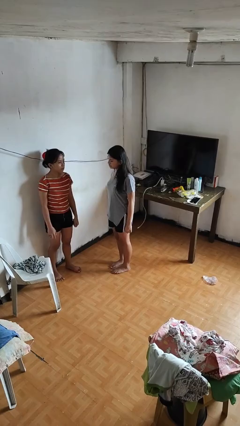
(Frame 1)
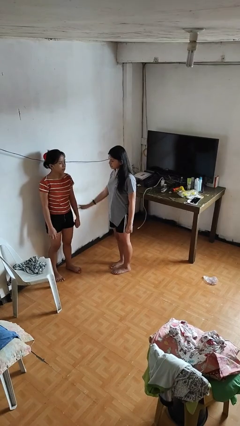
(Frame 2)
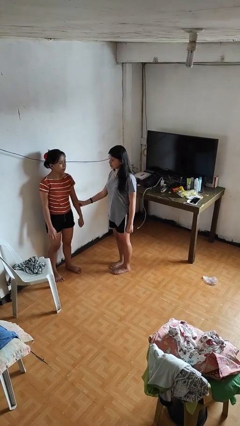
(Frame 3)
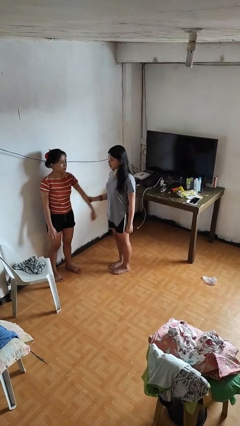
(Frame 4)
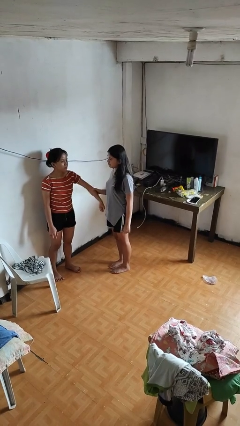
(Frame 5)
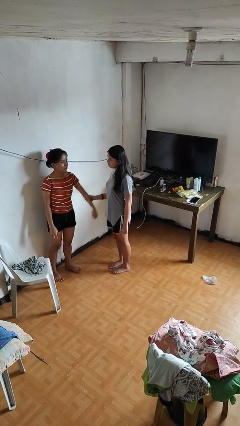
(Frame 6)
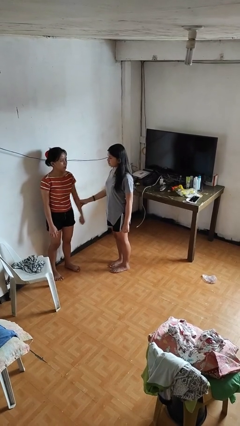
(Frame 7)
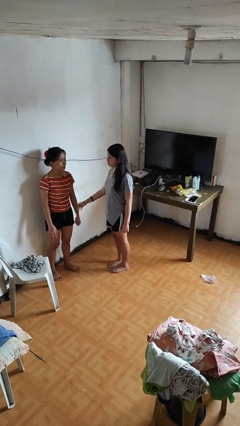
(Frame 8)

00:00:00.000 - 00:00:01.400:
person grabs person by forearm

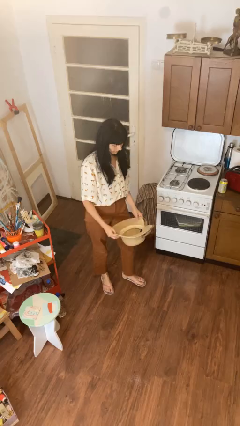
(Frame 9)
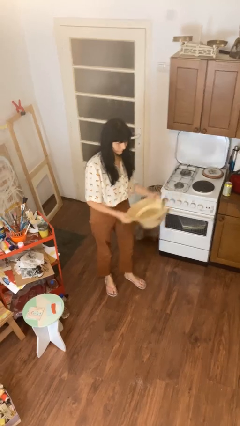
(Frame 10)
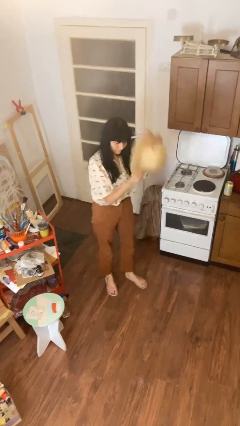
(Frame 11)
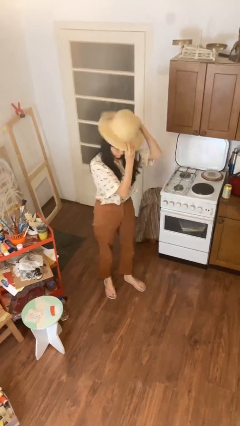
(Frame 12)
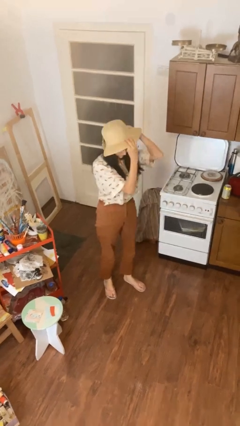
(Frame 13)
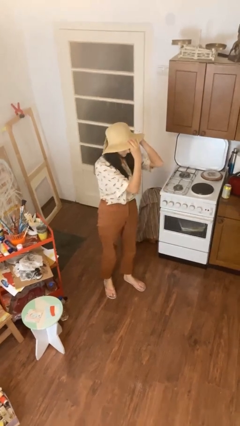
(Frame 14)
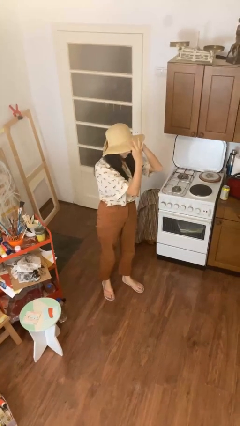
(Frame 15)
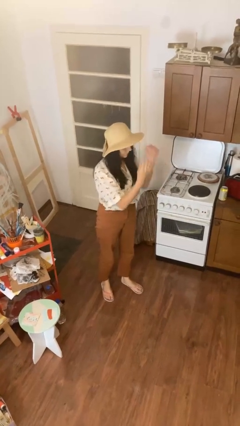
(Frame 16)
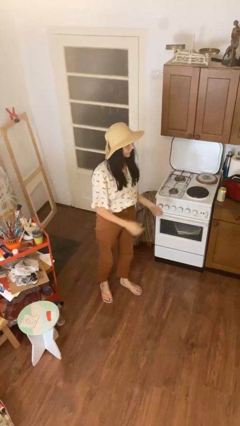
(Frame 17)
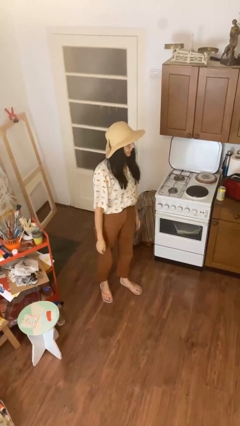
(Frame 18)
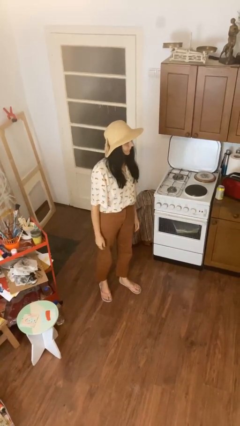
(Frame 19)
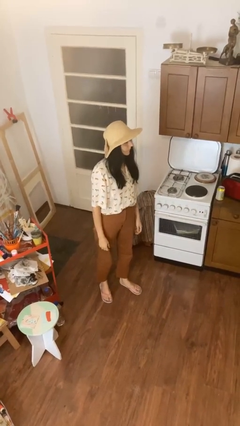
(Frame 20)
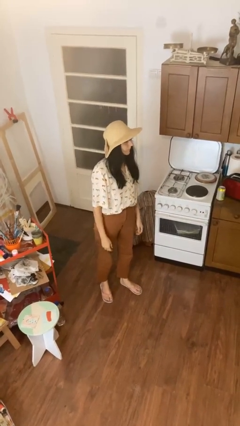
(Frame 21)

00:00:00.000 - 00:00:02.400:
person puts on hat

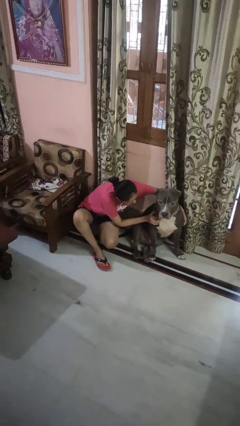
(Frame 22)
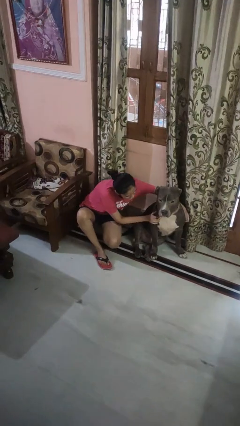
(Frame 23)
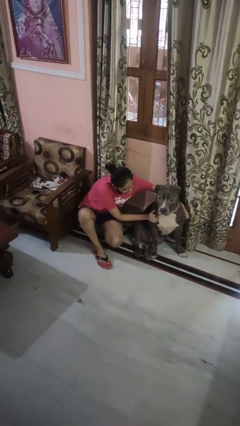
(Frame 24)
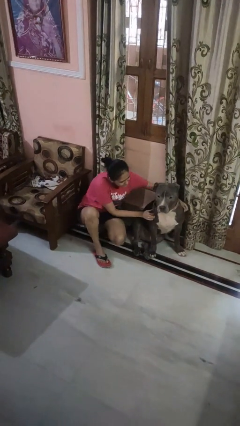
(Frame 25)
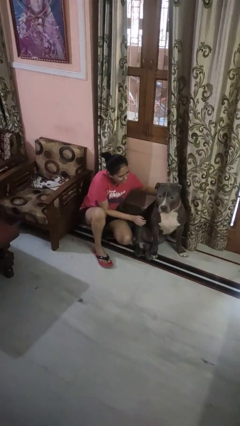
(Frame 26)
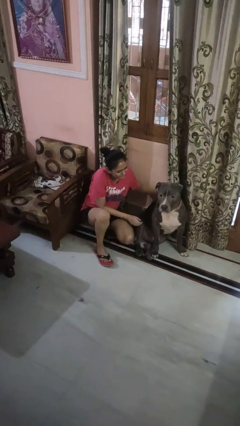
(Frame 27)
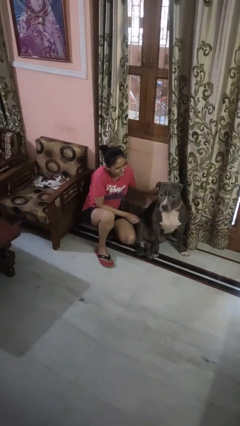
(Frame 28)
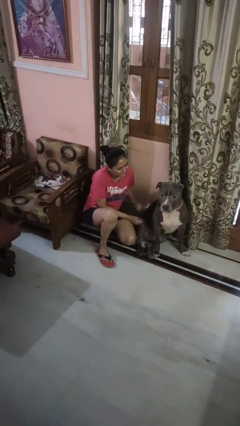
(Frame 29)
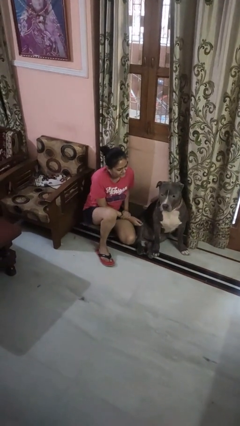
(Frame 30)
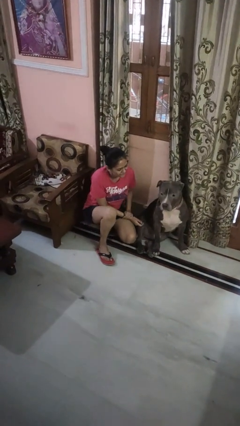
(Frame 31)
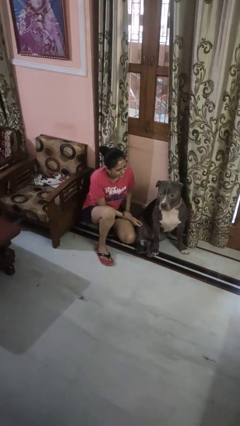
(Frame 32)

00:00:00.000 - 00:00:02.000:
person hugs dog

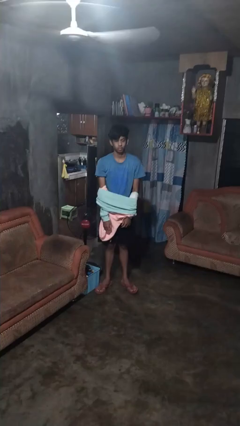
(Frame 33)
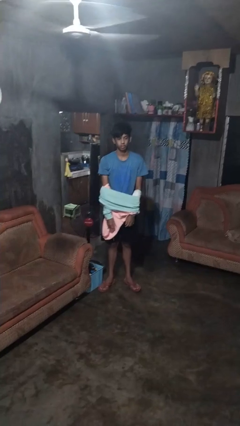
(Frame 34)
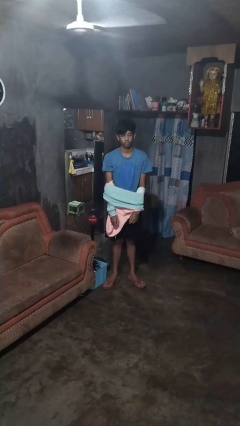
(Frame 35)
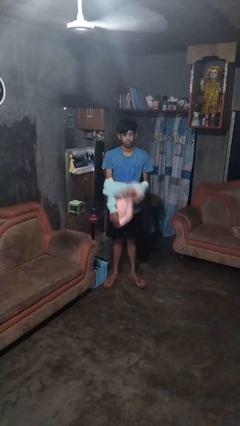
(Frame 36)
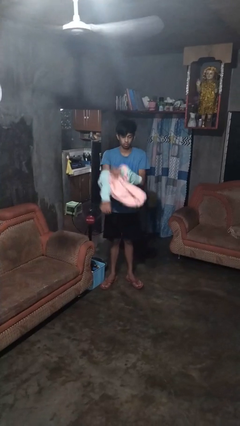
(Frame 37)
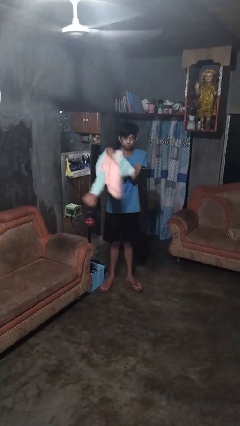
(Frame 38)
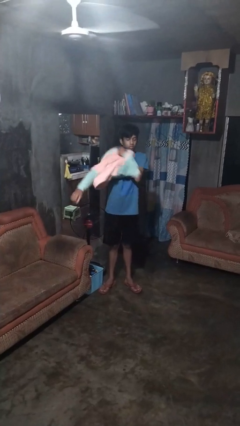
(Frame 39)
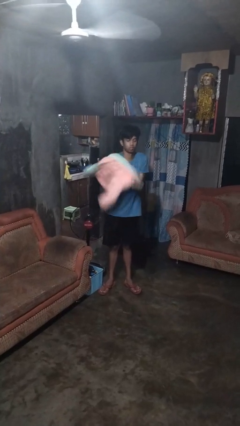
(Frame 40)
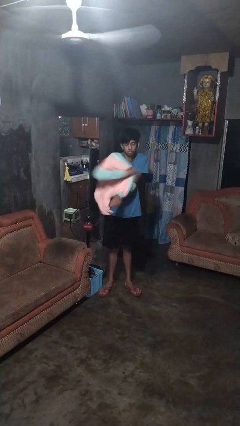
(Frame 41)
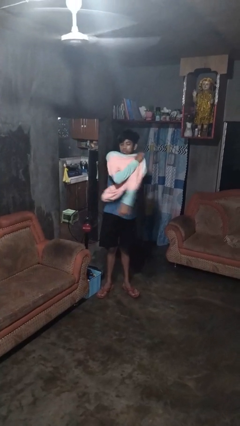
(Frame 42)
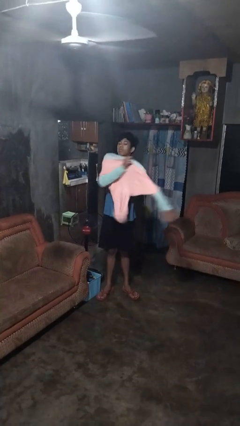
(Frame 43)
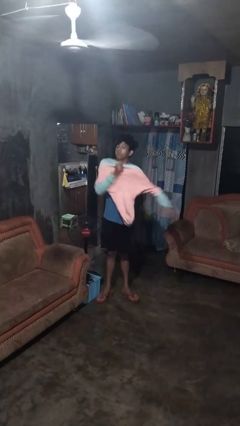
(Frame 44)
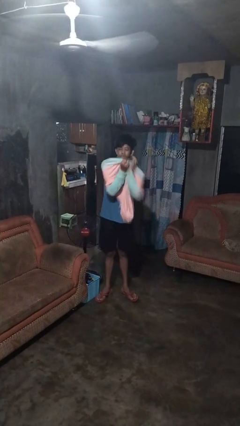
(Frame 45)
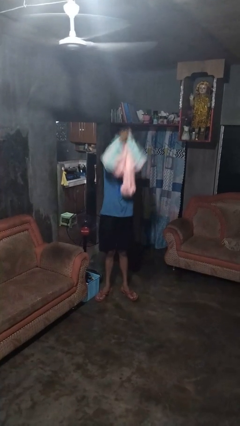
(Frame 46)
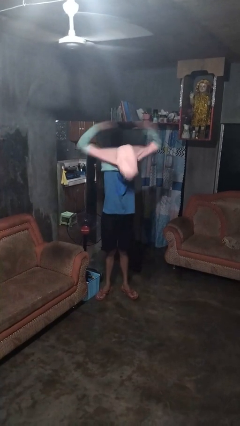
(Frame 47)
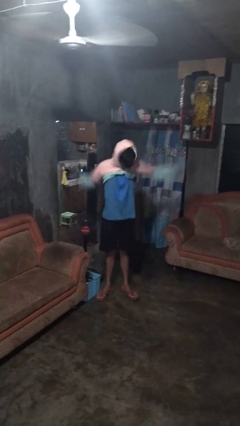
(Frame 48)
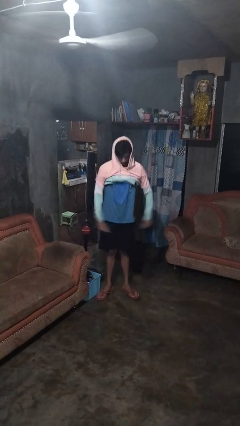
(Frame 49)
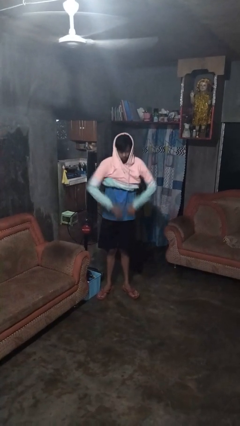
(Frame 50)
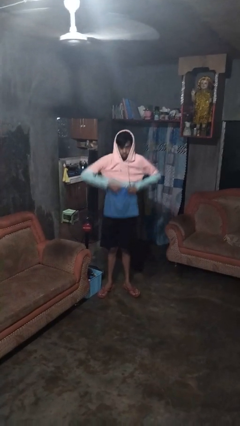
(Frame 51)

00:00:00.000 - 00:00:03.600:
person puts on hoodie

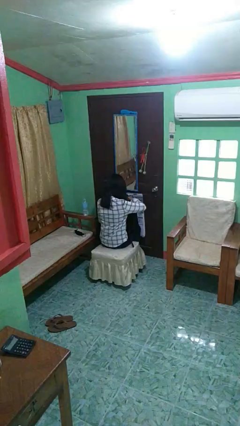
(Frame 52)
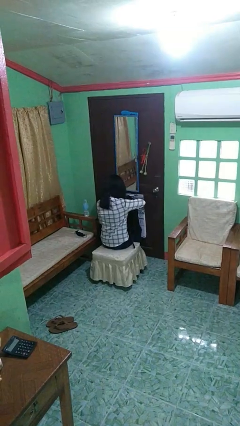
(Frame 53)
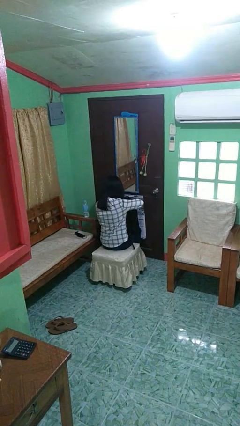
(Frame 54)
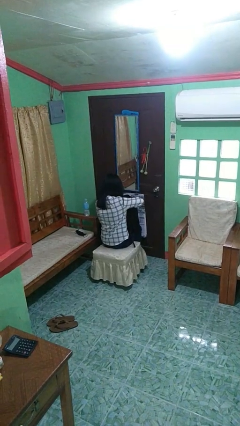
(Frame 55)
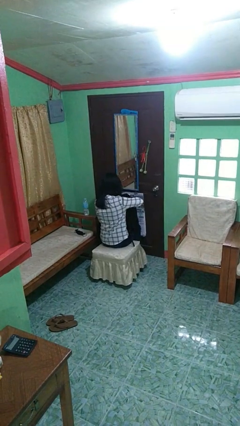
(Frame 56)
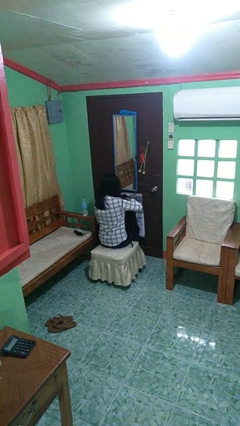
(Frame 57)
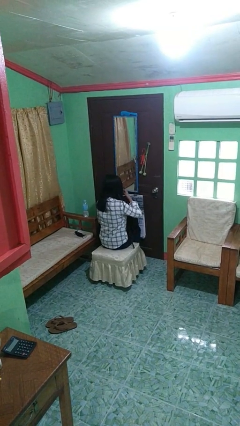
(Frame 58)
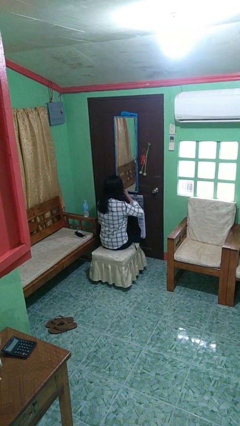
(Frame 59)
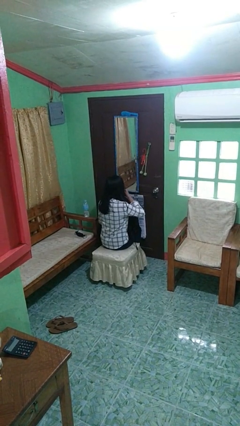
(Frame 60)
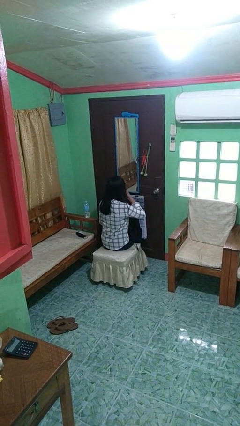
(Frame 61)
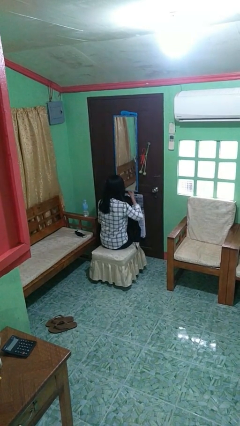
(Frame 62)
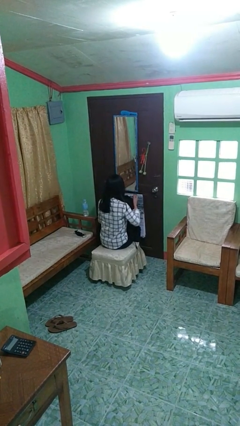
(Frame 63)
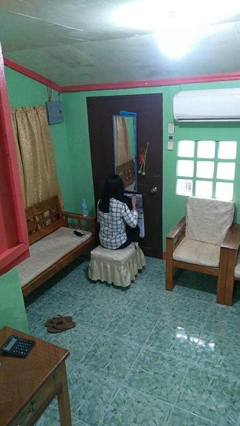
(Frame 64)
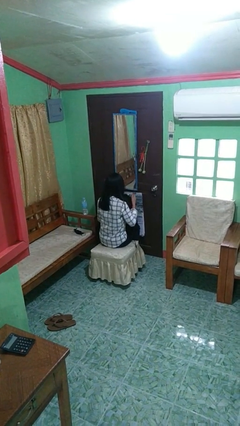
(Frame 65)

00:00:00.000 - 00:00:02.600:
person eats snack from bag

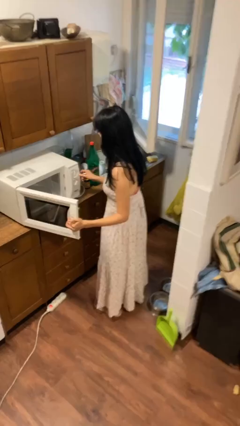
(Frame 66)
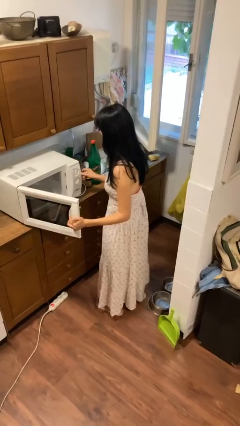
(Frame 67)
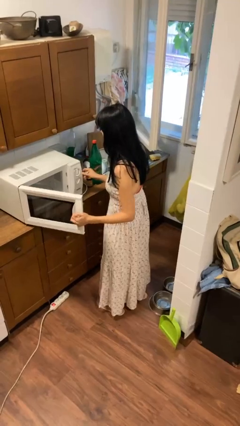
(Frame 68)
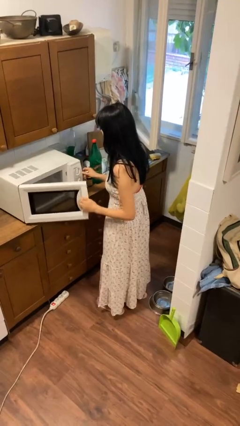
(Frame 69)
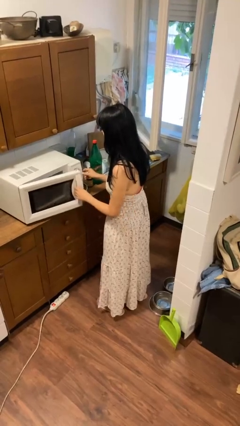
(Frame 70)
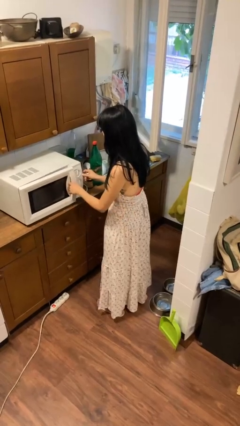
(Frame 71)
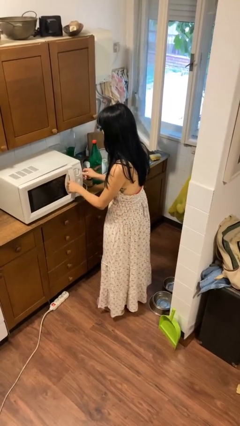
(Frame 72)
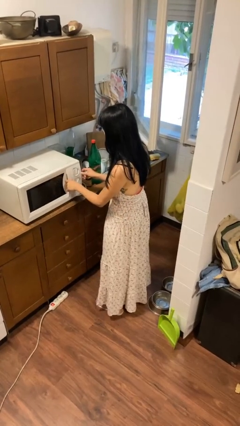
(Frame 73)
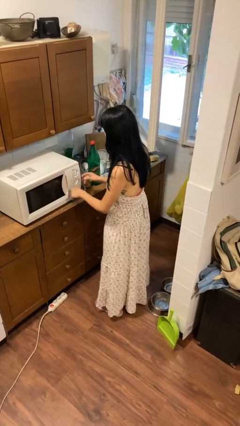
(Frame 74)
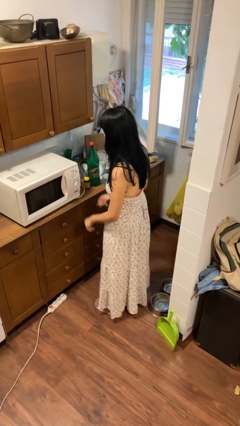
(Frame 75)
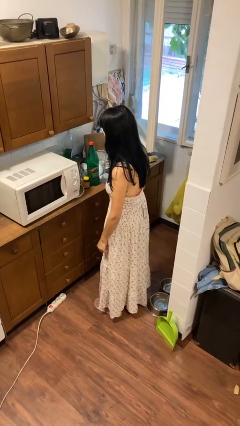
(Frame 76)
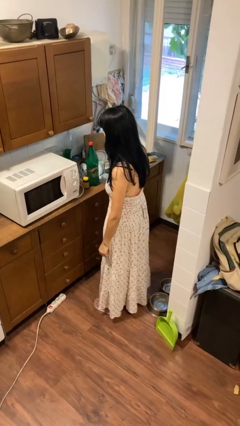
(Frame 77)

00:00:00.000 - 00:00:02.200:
person closes microwave

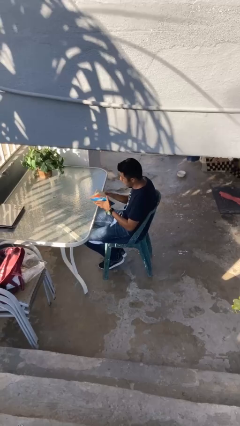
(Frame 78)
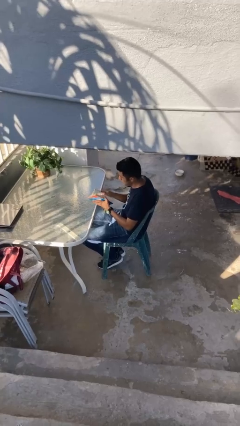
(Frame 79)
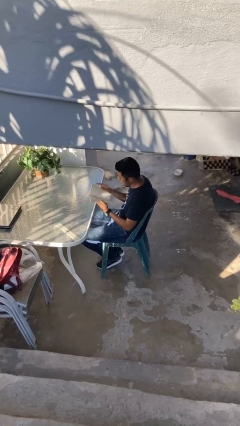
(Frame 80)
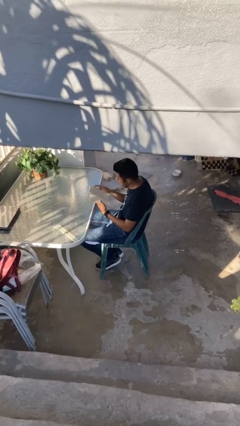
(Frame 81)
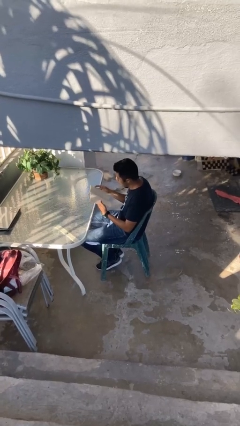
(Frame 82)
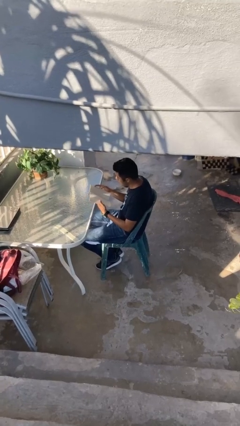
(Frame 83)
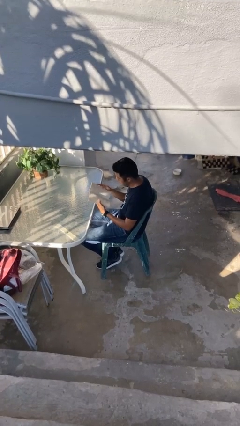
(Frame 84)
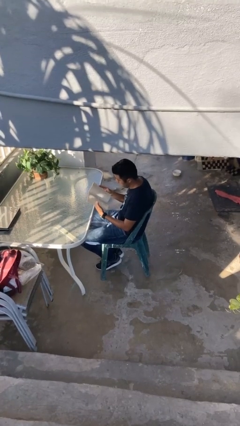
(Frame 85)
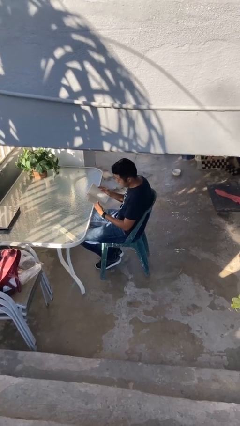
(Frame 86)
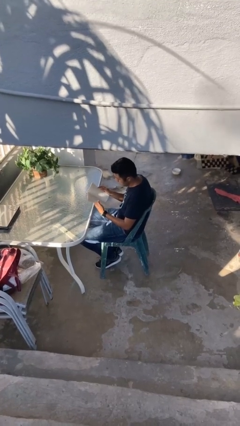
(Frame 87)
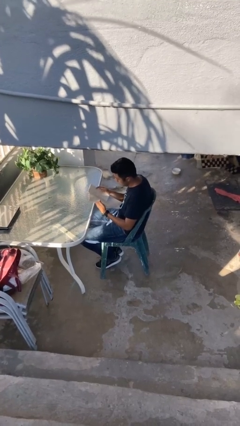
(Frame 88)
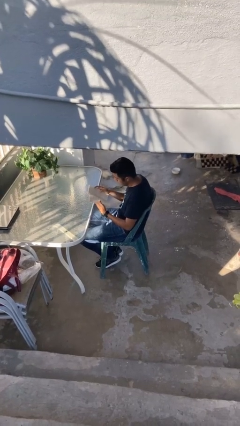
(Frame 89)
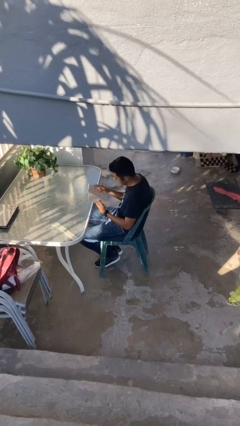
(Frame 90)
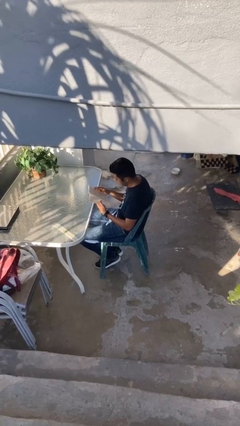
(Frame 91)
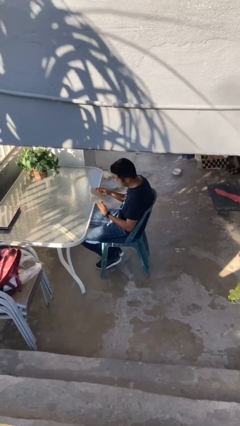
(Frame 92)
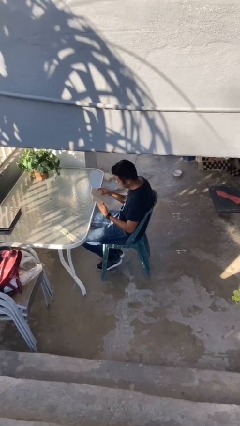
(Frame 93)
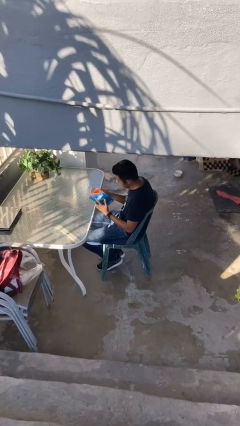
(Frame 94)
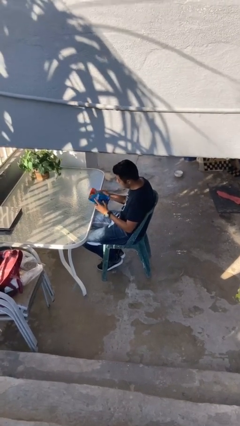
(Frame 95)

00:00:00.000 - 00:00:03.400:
person reads document
